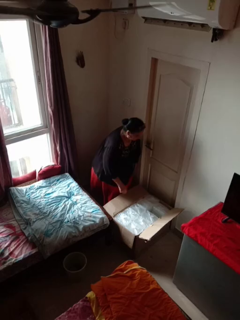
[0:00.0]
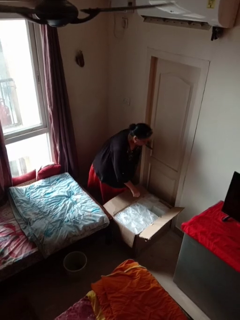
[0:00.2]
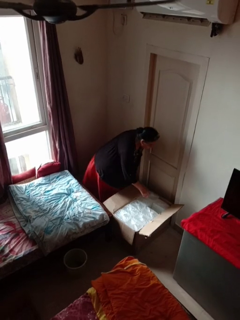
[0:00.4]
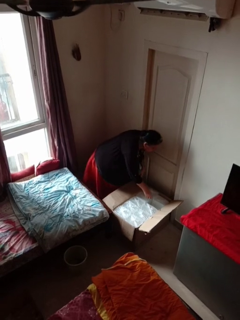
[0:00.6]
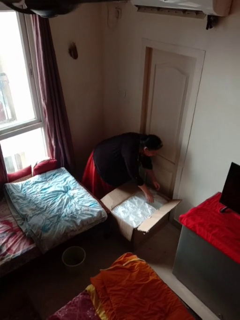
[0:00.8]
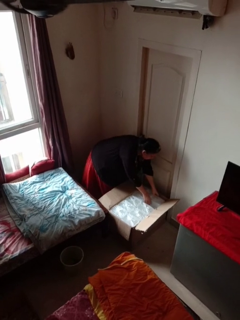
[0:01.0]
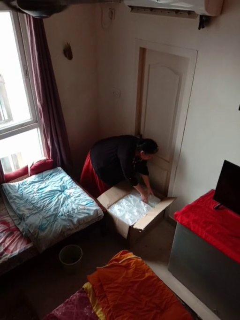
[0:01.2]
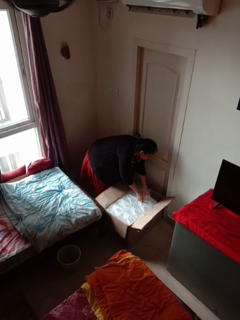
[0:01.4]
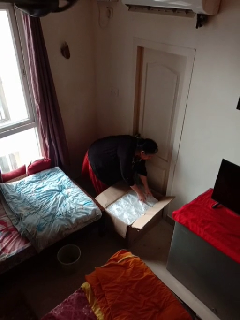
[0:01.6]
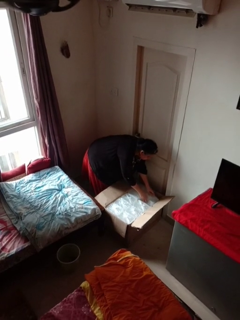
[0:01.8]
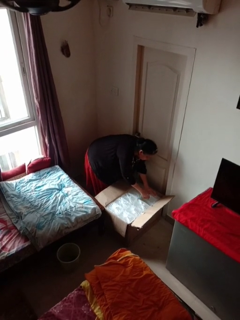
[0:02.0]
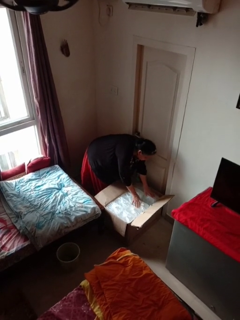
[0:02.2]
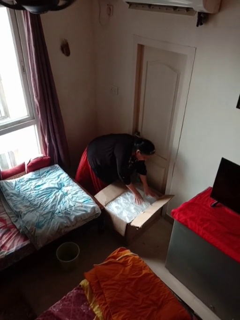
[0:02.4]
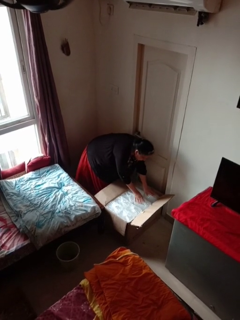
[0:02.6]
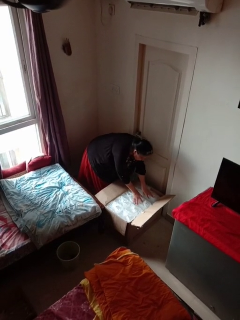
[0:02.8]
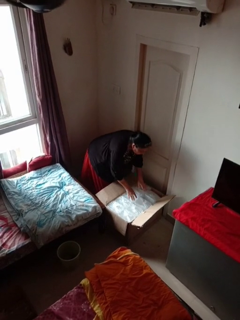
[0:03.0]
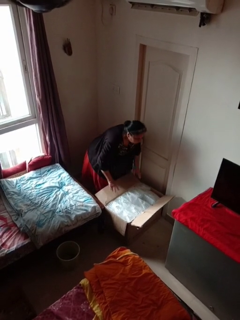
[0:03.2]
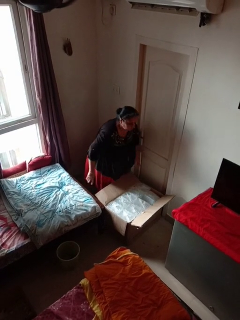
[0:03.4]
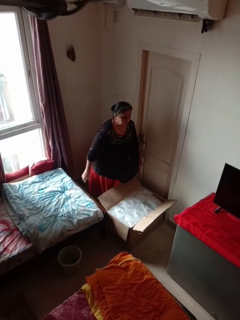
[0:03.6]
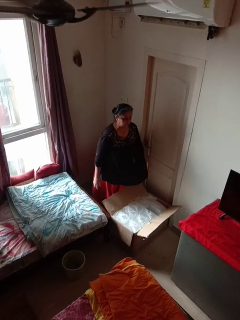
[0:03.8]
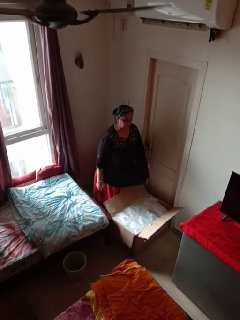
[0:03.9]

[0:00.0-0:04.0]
person searches in box

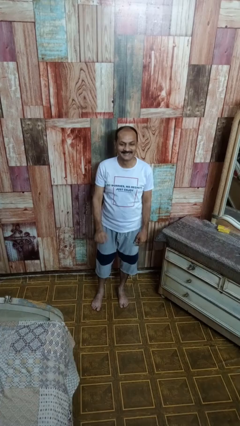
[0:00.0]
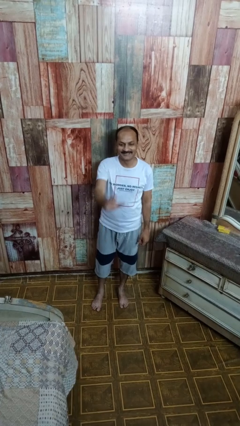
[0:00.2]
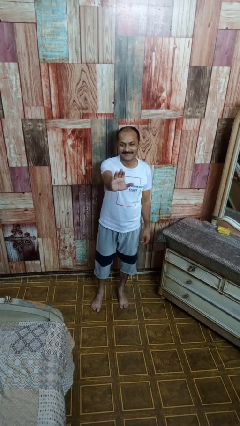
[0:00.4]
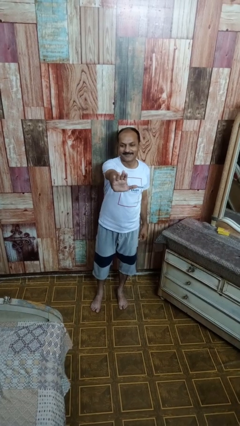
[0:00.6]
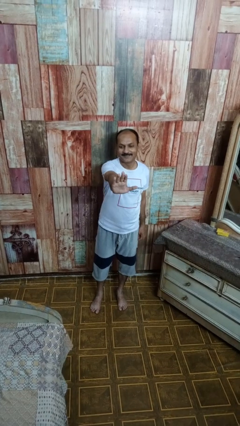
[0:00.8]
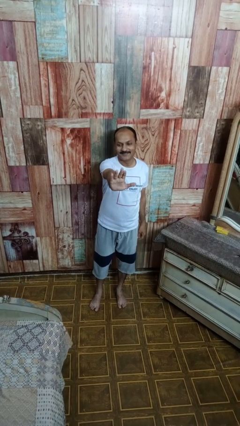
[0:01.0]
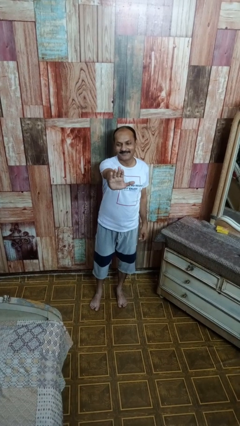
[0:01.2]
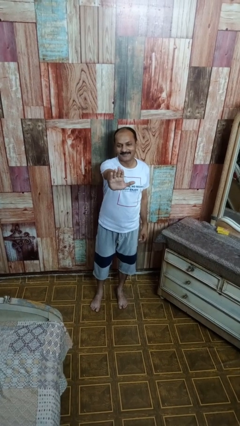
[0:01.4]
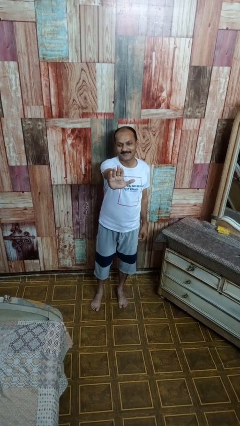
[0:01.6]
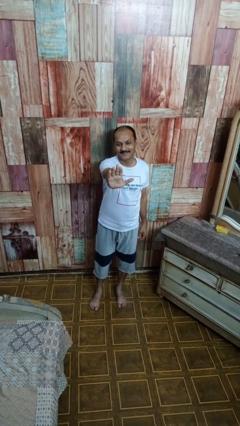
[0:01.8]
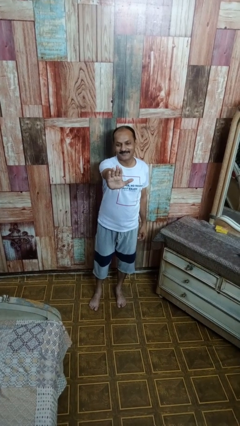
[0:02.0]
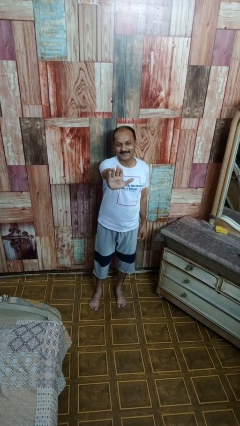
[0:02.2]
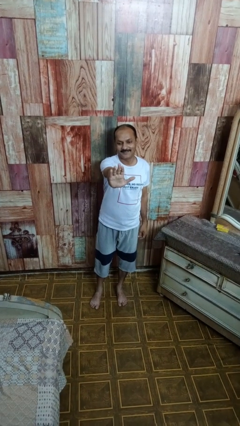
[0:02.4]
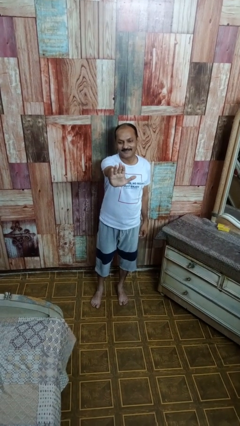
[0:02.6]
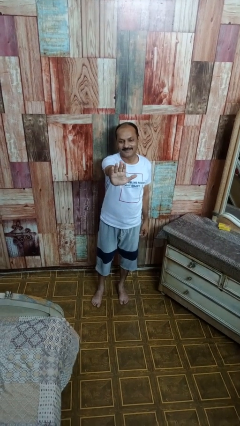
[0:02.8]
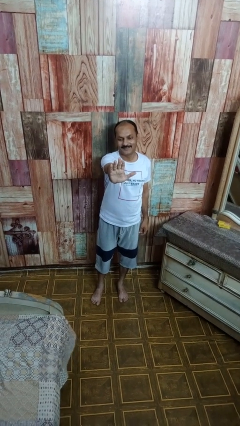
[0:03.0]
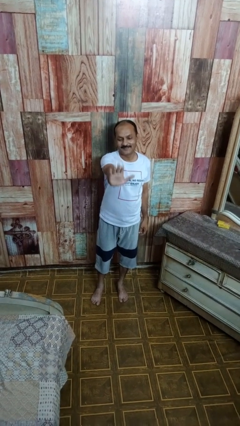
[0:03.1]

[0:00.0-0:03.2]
person gestures stop

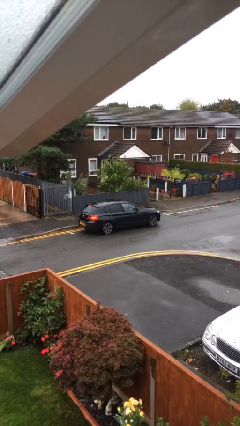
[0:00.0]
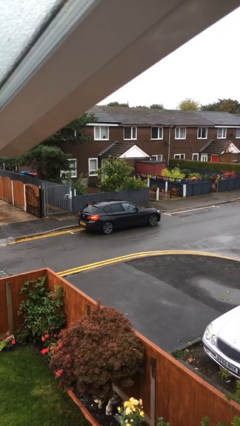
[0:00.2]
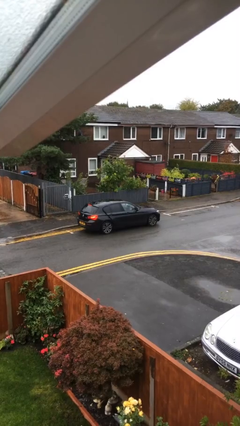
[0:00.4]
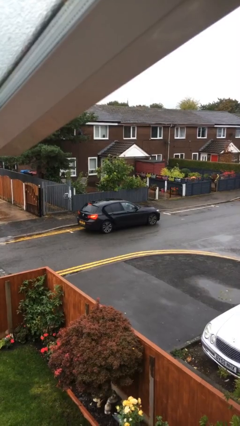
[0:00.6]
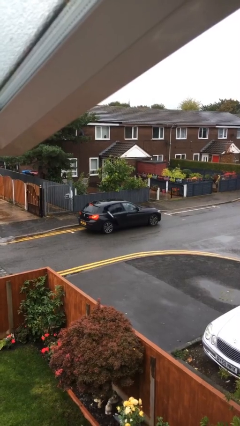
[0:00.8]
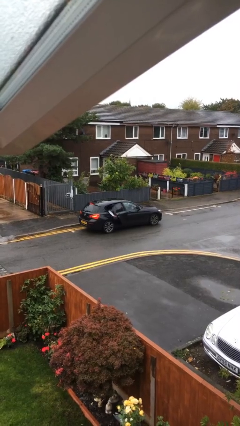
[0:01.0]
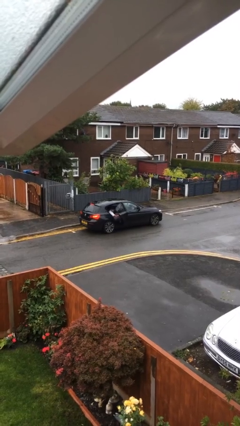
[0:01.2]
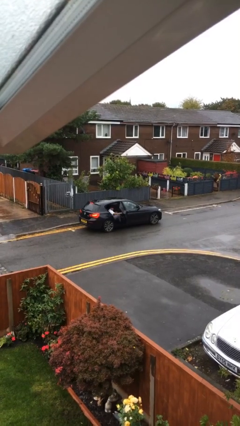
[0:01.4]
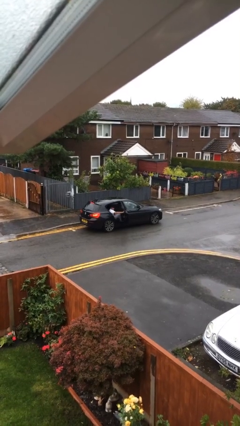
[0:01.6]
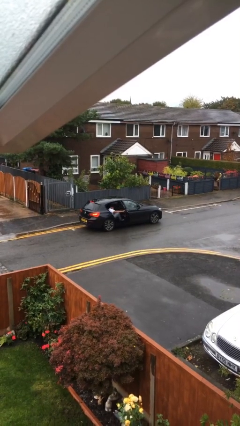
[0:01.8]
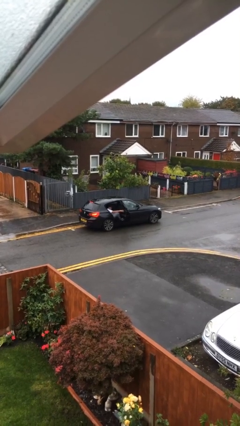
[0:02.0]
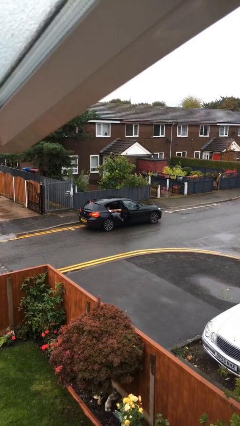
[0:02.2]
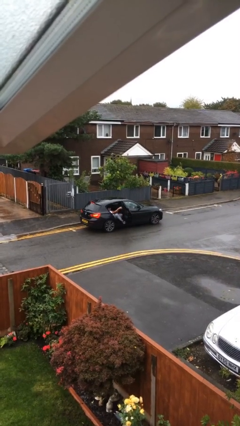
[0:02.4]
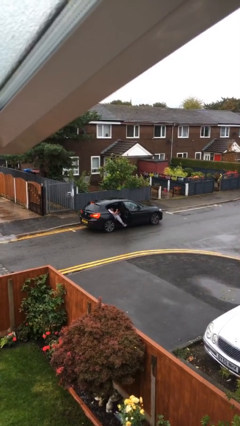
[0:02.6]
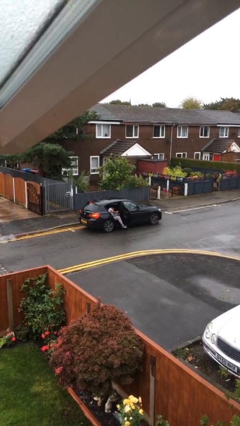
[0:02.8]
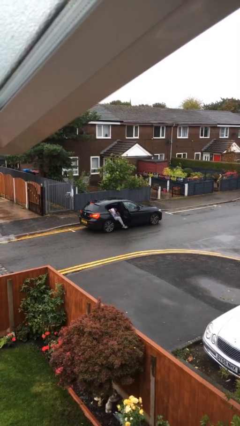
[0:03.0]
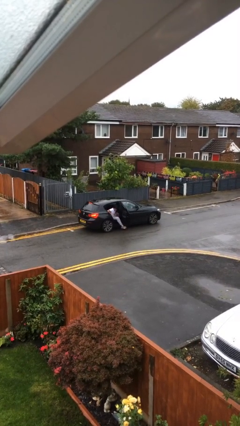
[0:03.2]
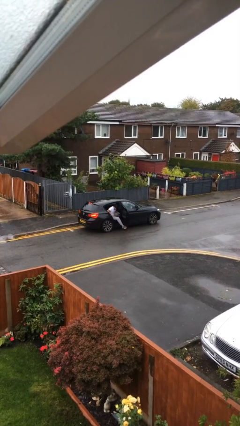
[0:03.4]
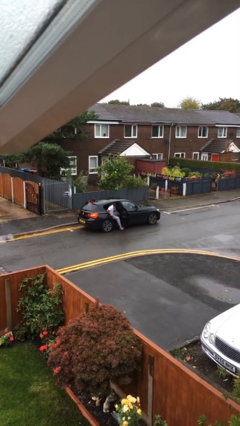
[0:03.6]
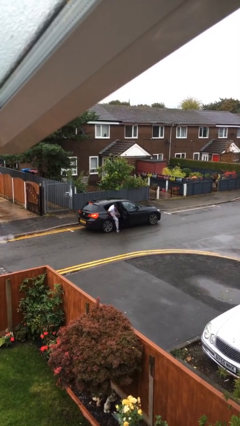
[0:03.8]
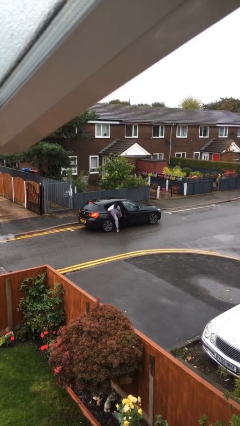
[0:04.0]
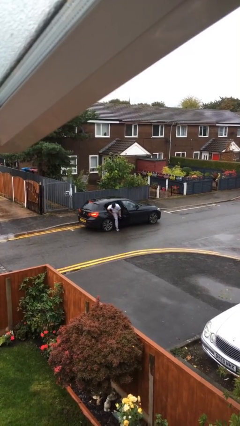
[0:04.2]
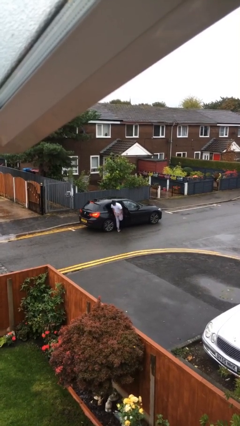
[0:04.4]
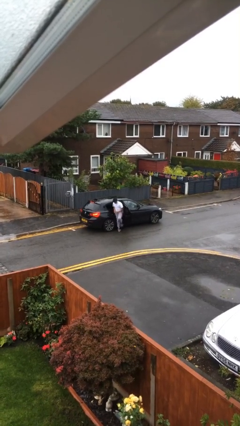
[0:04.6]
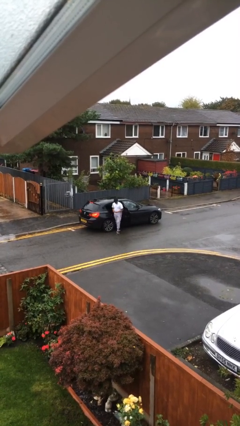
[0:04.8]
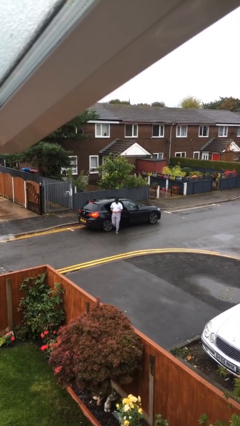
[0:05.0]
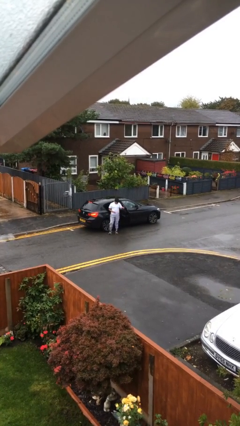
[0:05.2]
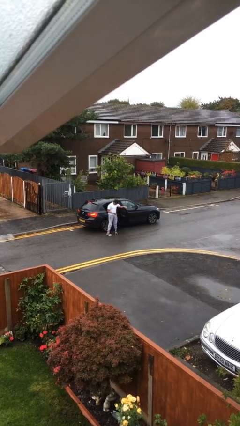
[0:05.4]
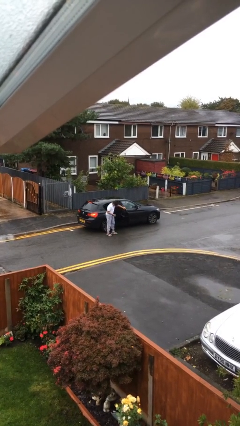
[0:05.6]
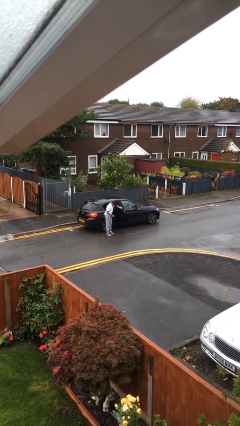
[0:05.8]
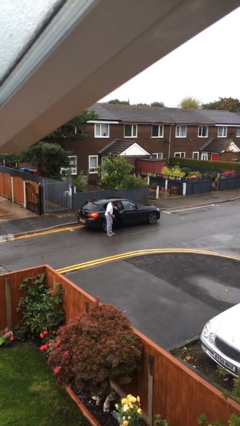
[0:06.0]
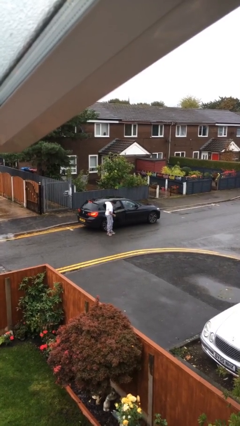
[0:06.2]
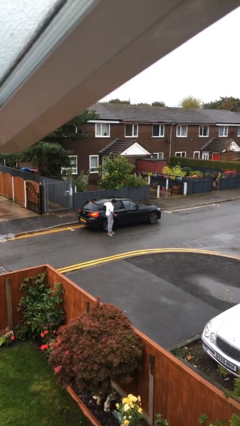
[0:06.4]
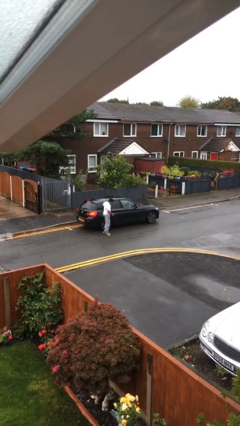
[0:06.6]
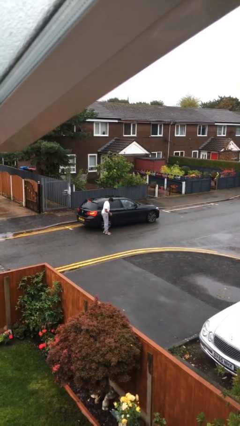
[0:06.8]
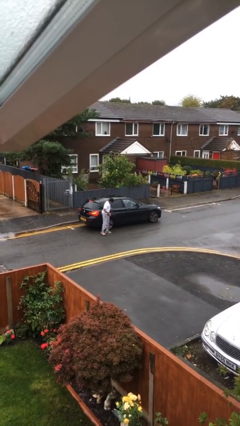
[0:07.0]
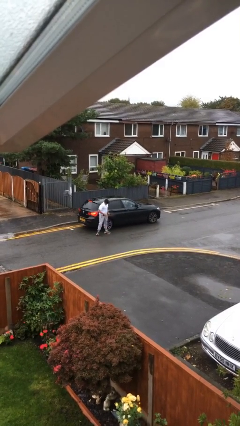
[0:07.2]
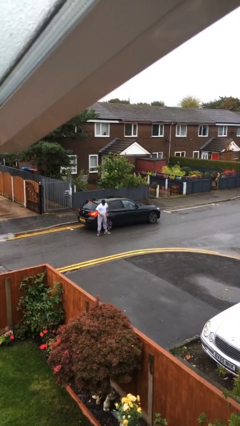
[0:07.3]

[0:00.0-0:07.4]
car drops off person

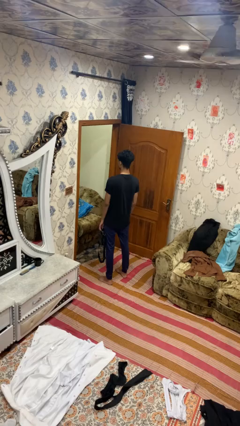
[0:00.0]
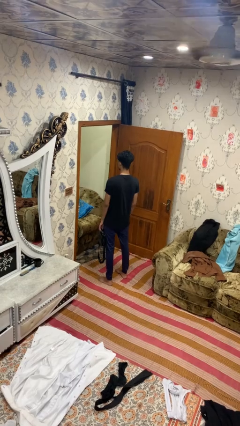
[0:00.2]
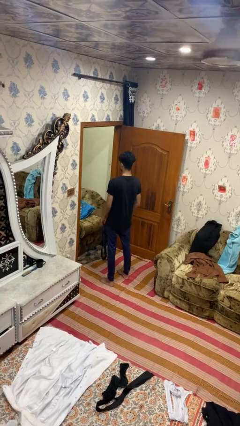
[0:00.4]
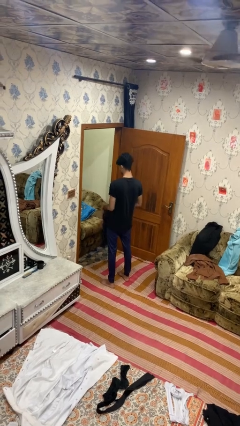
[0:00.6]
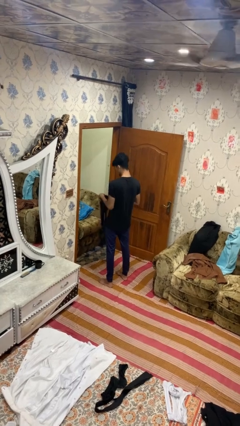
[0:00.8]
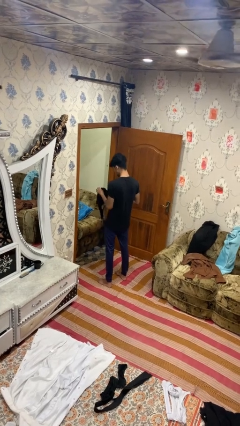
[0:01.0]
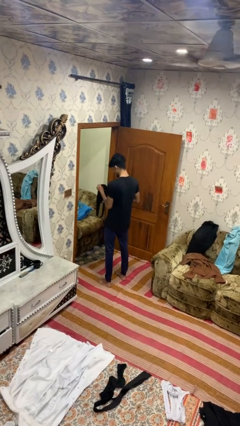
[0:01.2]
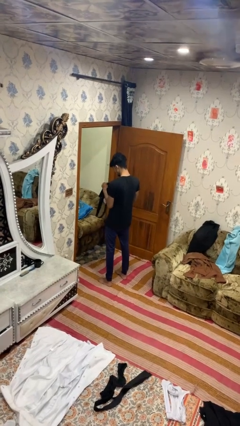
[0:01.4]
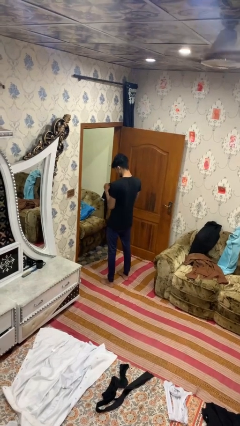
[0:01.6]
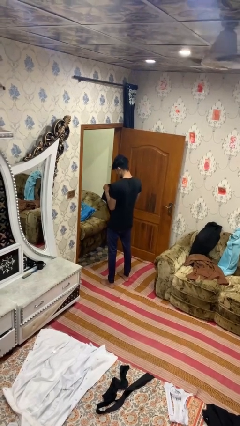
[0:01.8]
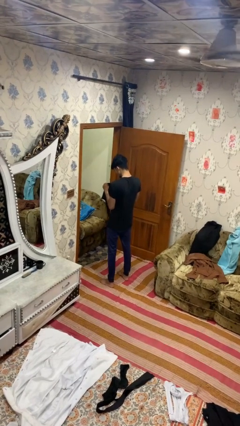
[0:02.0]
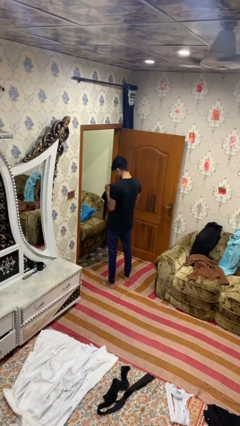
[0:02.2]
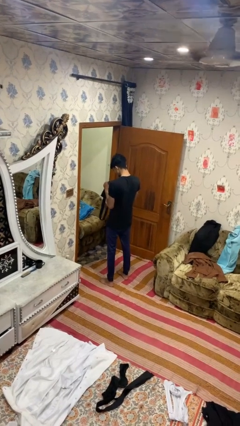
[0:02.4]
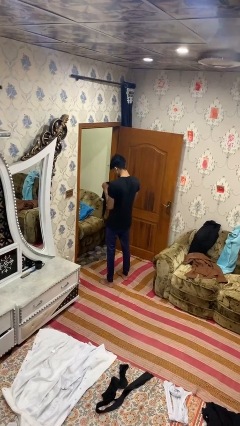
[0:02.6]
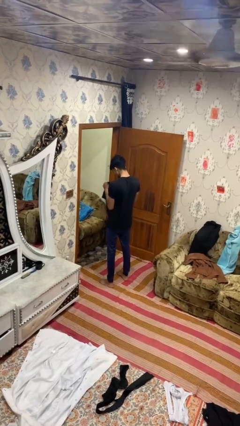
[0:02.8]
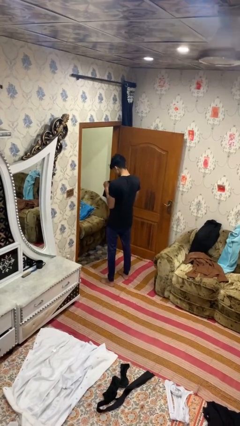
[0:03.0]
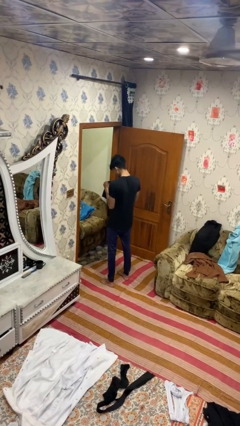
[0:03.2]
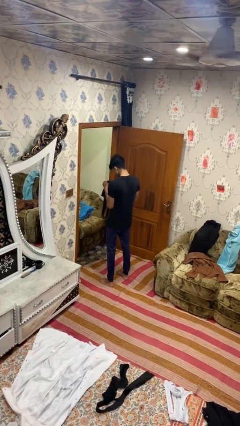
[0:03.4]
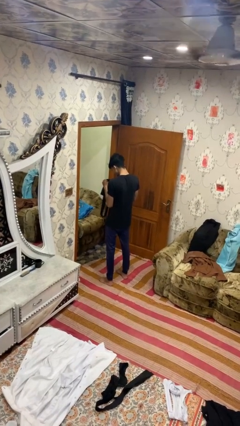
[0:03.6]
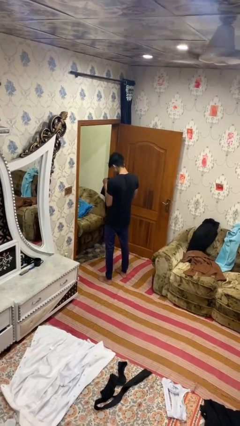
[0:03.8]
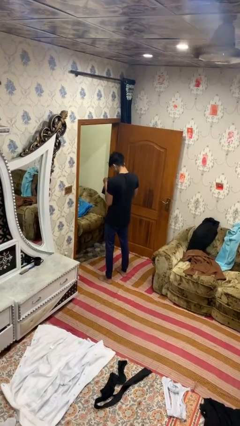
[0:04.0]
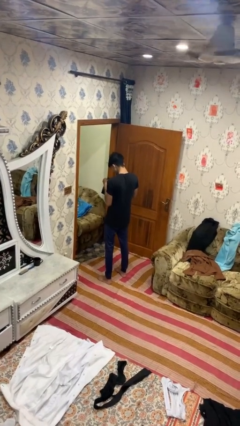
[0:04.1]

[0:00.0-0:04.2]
person searches in bag
